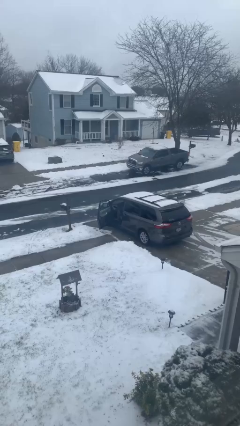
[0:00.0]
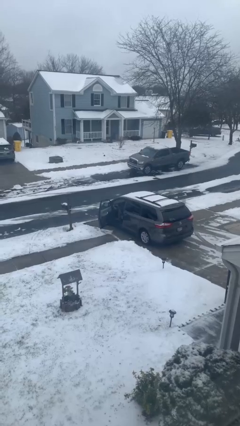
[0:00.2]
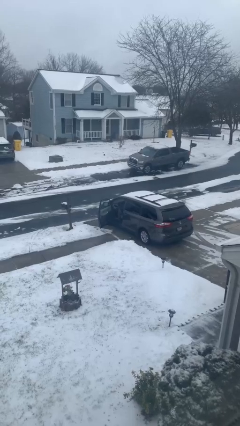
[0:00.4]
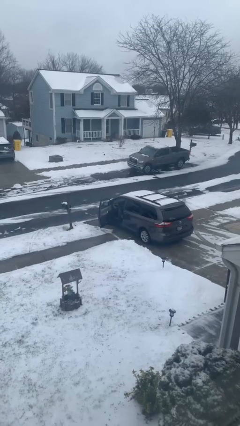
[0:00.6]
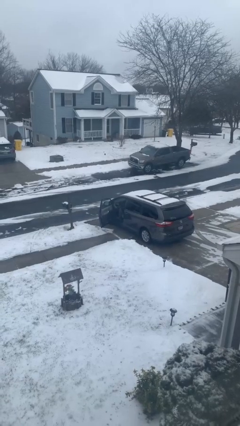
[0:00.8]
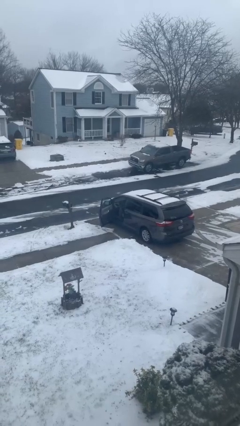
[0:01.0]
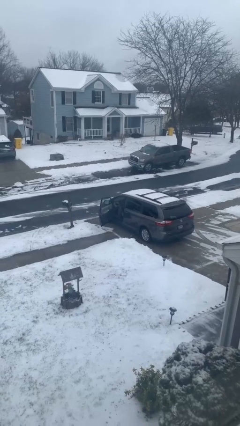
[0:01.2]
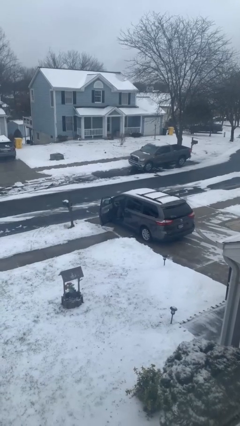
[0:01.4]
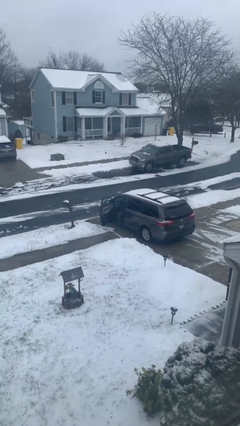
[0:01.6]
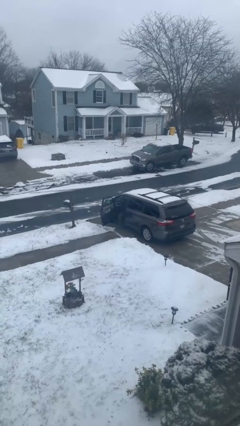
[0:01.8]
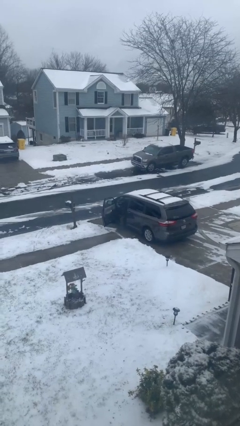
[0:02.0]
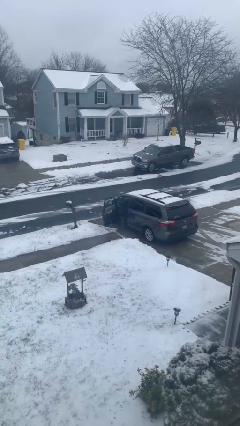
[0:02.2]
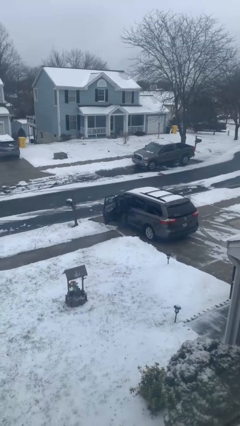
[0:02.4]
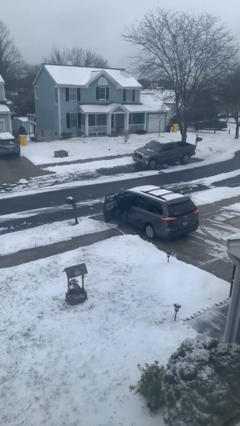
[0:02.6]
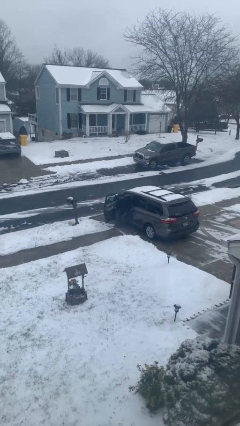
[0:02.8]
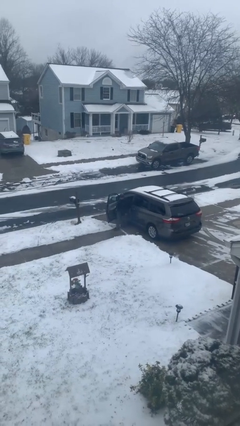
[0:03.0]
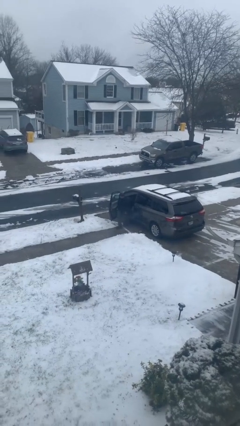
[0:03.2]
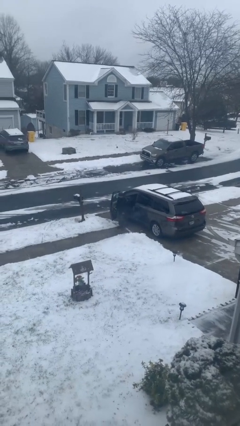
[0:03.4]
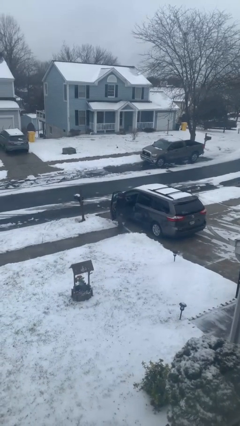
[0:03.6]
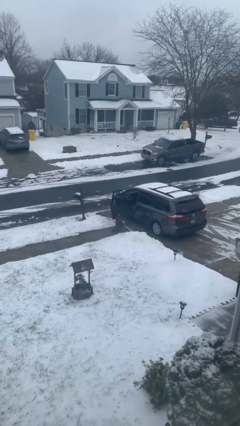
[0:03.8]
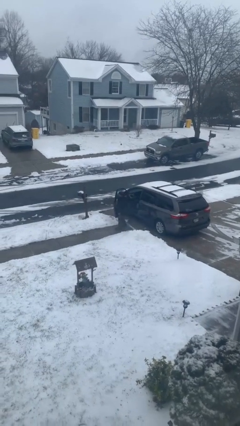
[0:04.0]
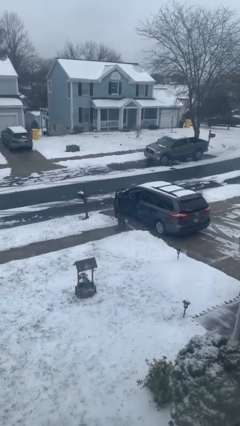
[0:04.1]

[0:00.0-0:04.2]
person exits car

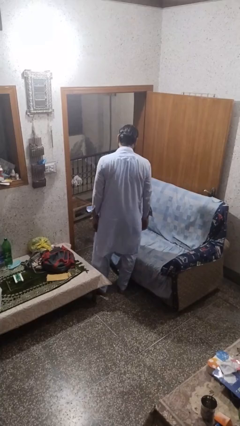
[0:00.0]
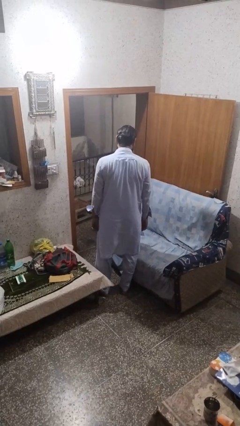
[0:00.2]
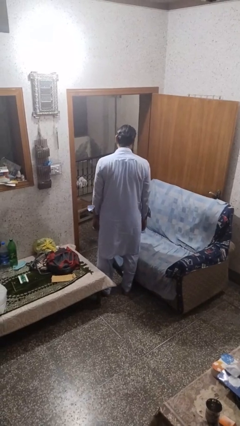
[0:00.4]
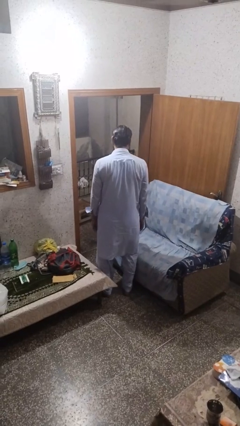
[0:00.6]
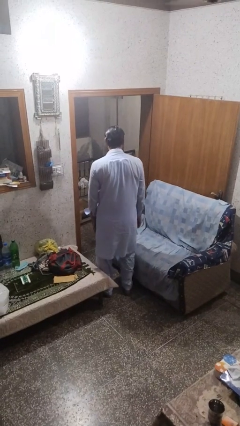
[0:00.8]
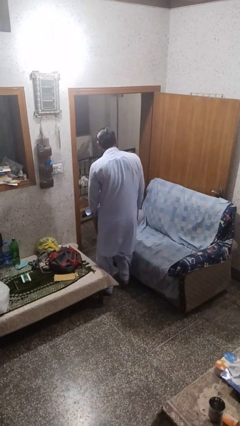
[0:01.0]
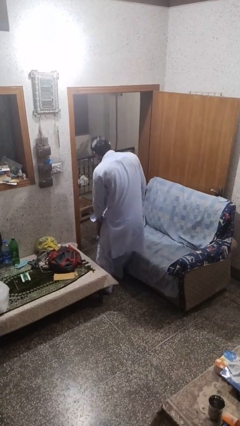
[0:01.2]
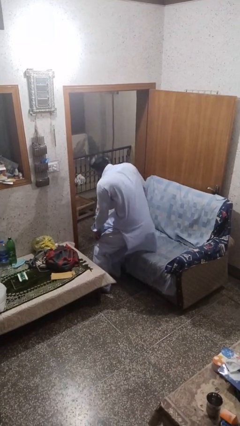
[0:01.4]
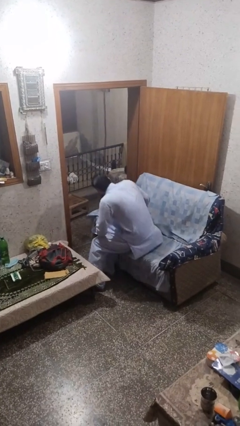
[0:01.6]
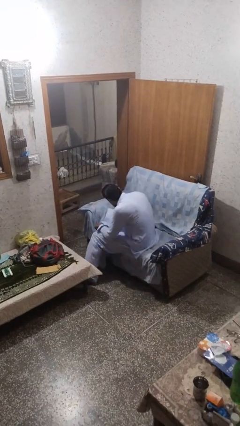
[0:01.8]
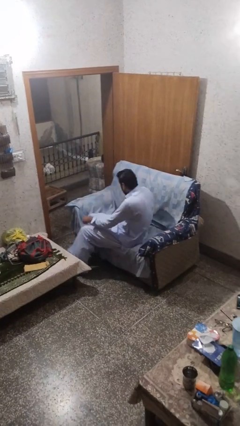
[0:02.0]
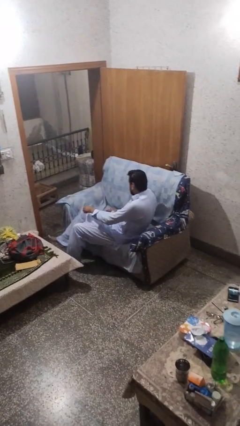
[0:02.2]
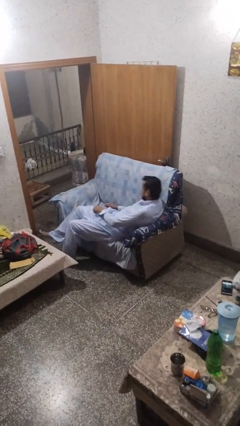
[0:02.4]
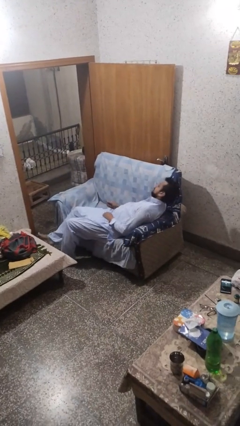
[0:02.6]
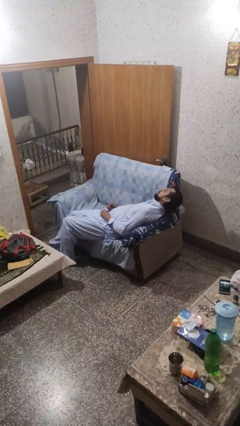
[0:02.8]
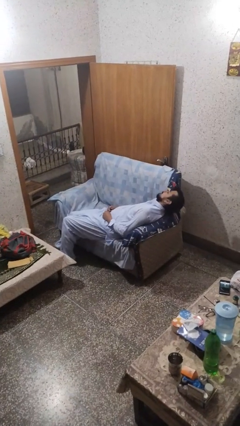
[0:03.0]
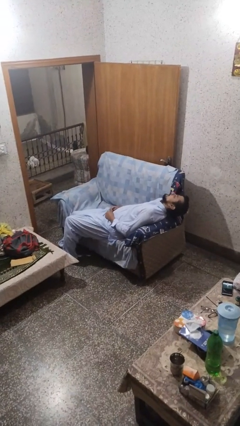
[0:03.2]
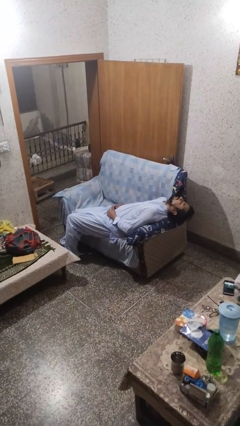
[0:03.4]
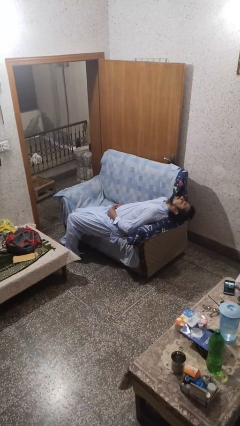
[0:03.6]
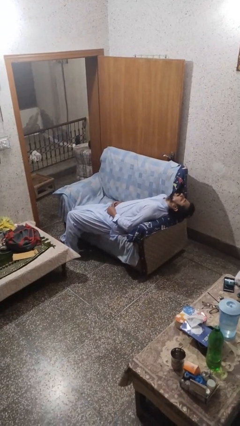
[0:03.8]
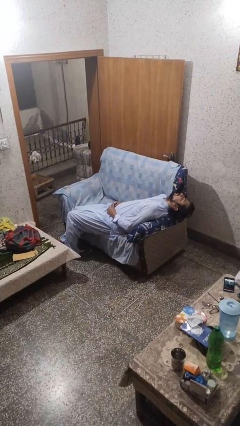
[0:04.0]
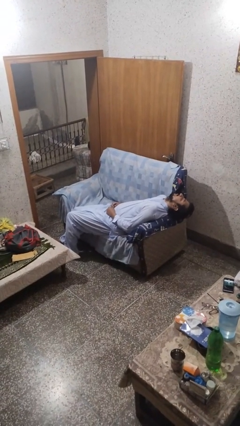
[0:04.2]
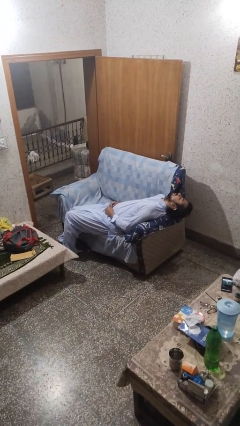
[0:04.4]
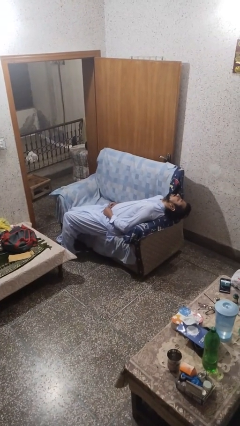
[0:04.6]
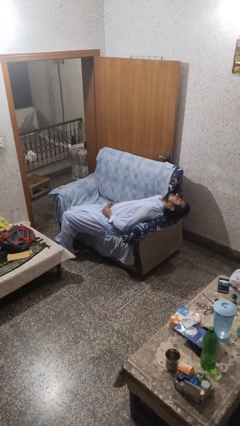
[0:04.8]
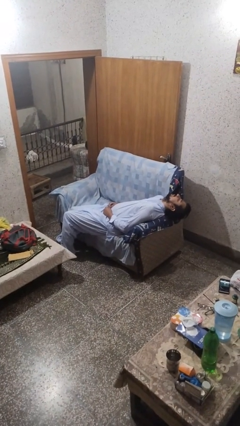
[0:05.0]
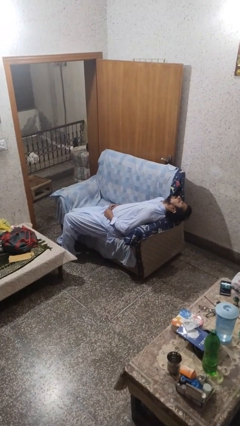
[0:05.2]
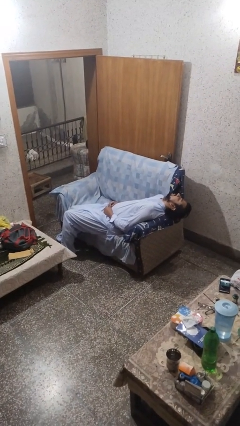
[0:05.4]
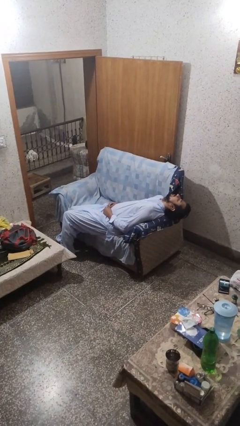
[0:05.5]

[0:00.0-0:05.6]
person lies down on couch

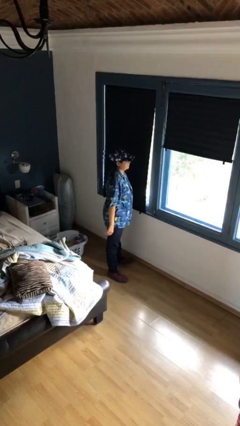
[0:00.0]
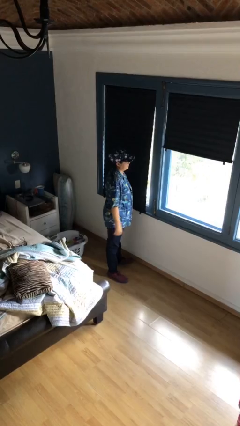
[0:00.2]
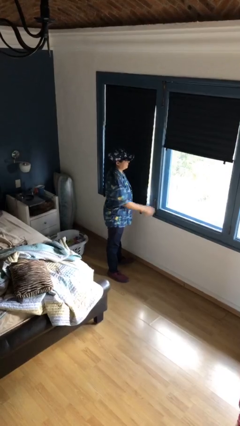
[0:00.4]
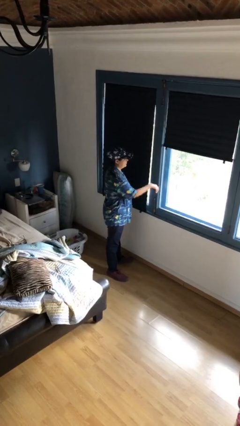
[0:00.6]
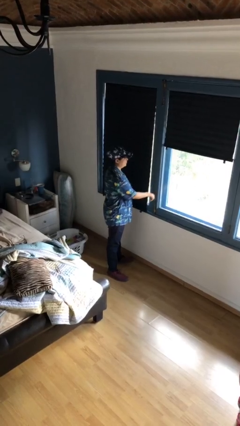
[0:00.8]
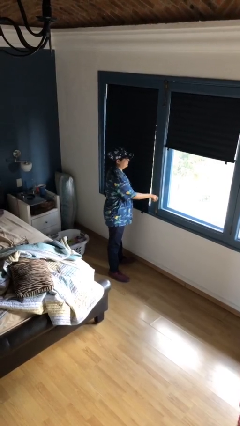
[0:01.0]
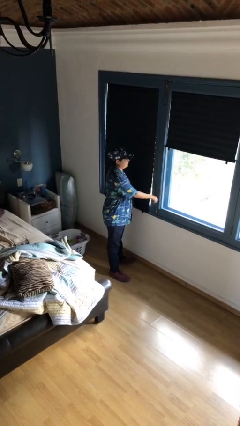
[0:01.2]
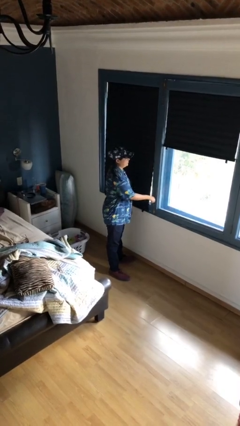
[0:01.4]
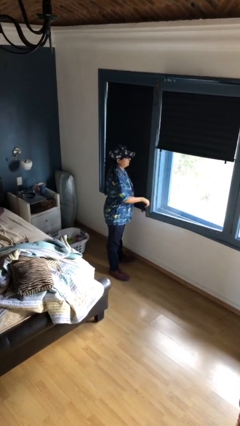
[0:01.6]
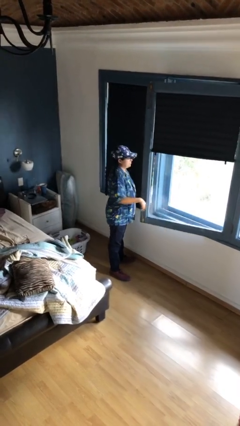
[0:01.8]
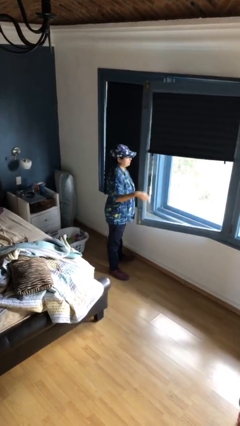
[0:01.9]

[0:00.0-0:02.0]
person opens home window

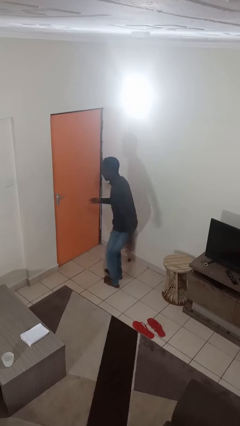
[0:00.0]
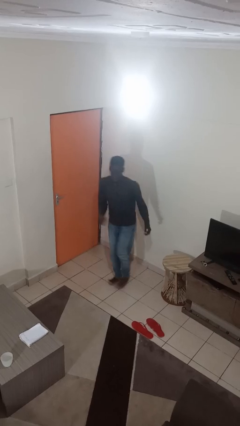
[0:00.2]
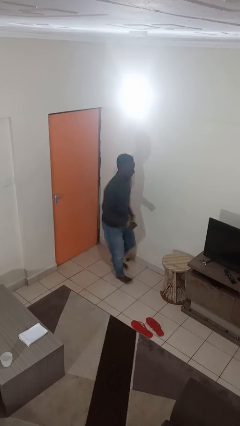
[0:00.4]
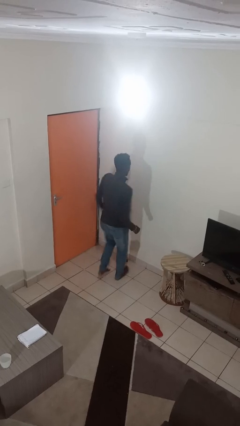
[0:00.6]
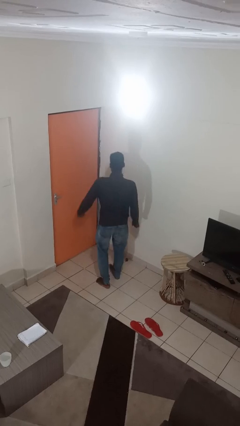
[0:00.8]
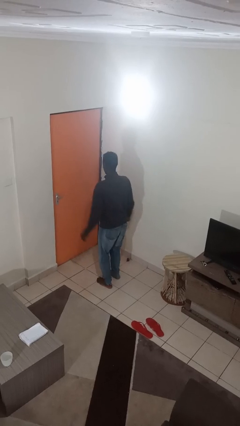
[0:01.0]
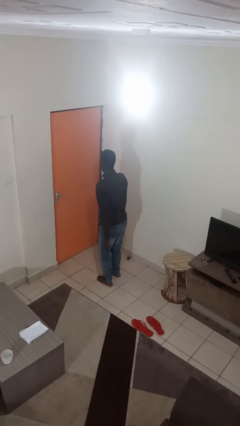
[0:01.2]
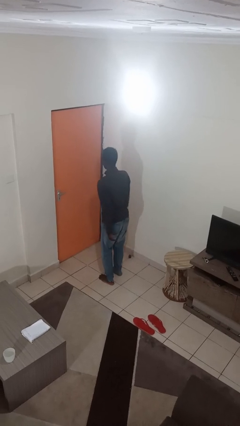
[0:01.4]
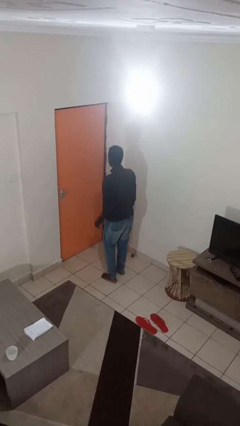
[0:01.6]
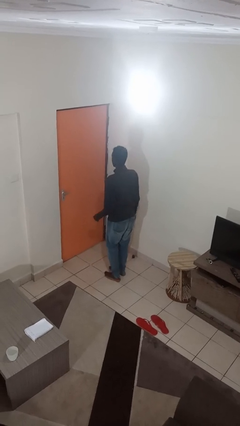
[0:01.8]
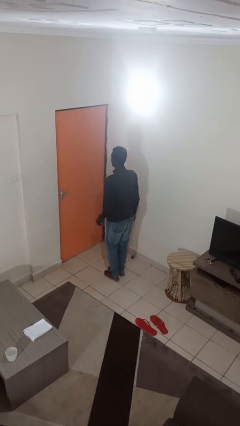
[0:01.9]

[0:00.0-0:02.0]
person twirls

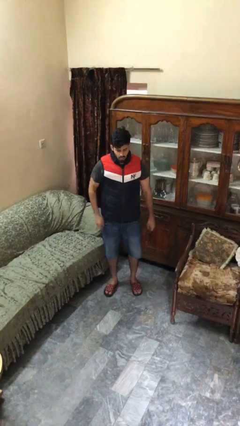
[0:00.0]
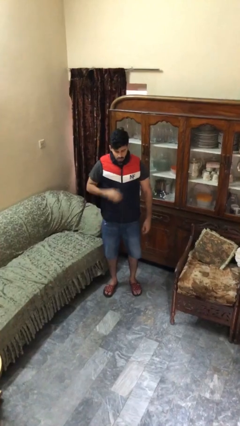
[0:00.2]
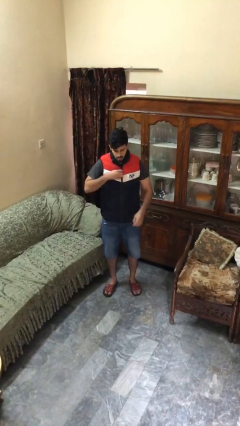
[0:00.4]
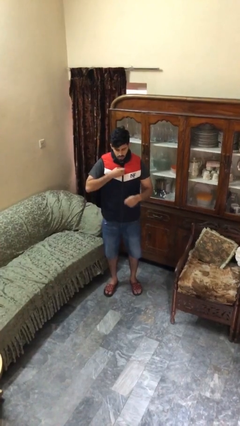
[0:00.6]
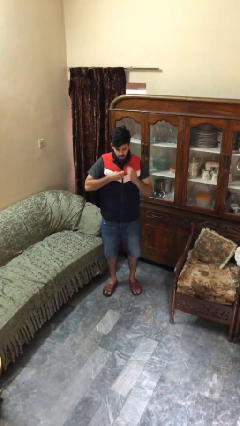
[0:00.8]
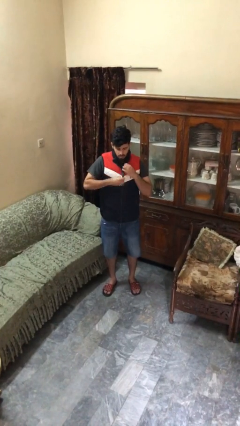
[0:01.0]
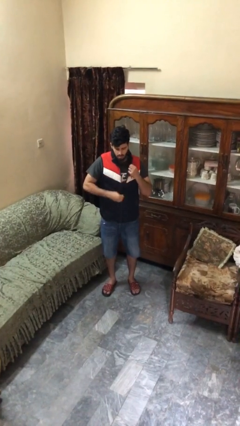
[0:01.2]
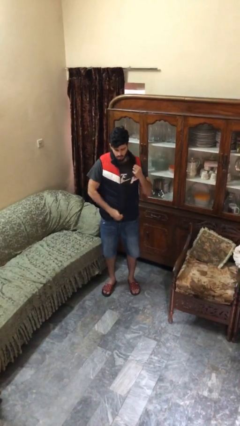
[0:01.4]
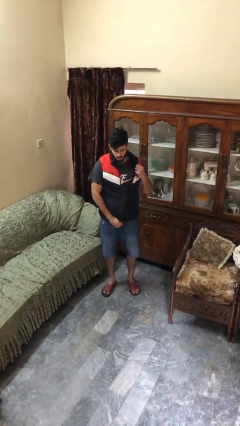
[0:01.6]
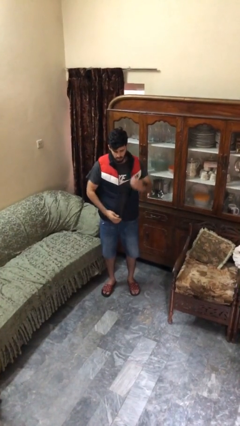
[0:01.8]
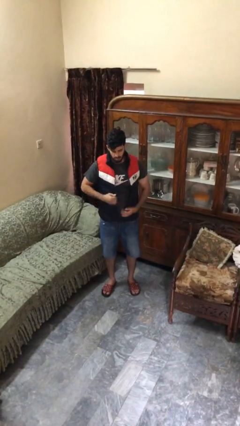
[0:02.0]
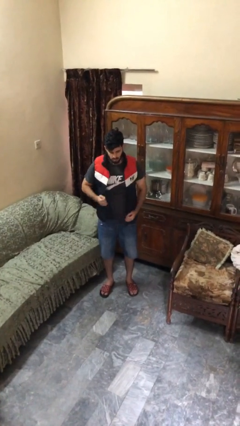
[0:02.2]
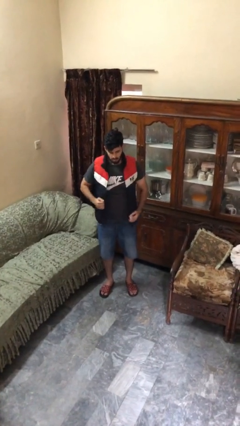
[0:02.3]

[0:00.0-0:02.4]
person unzips jacket

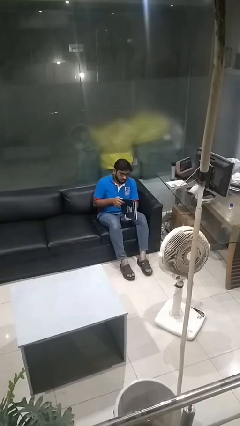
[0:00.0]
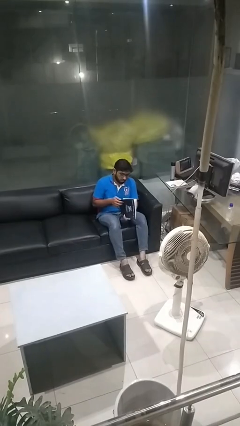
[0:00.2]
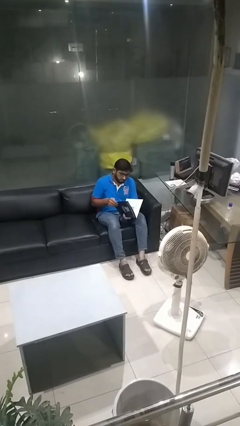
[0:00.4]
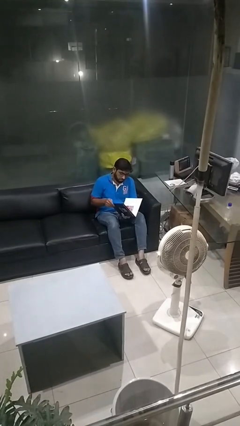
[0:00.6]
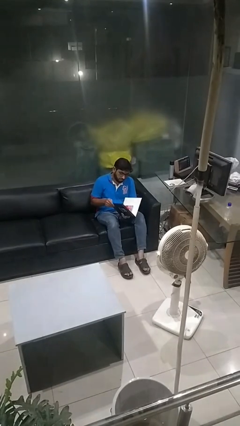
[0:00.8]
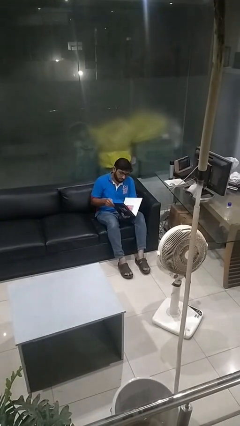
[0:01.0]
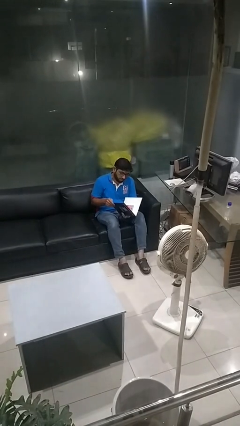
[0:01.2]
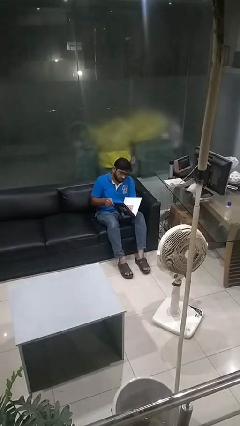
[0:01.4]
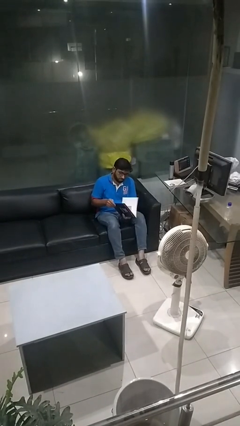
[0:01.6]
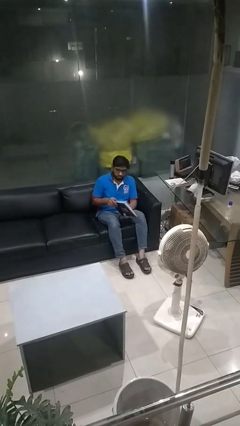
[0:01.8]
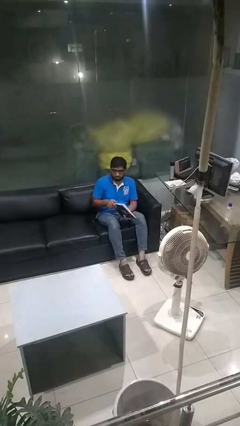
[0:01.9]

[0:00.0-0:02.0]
person reads magazine
